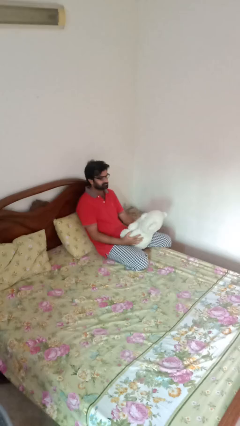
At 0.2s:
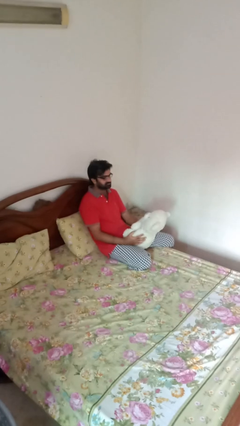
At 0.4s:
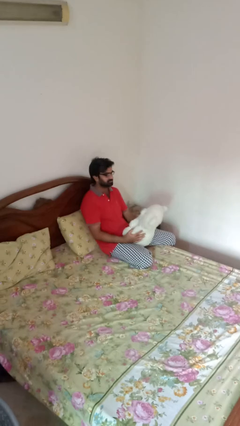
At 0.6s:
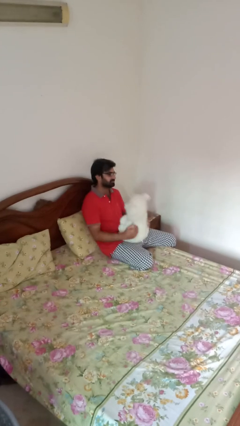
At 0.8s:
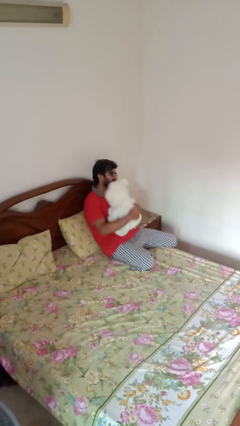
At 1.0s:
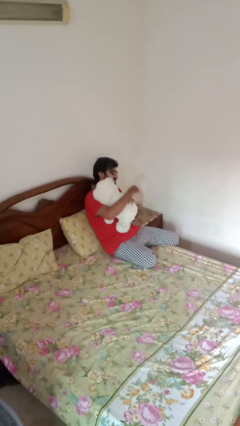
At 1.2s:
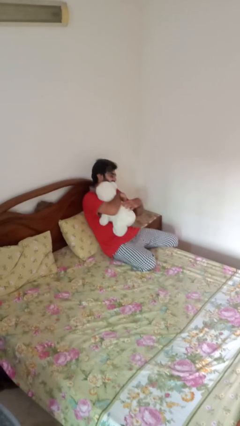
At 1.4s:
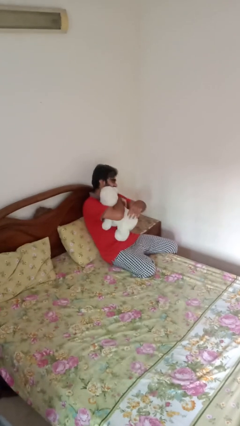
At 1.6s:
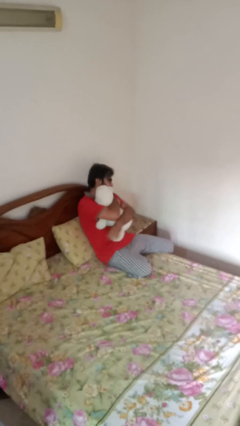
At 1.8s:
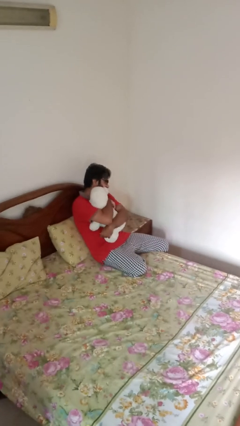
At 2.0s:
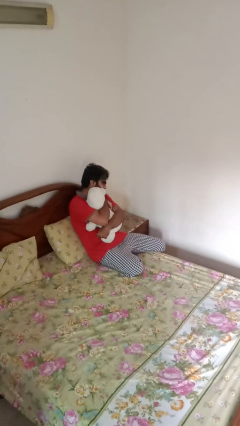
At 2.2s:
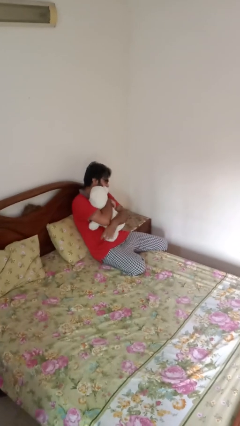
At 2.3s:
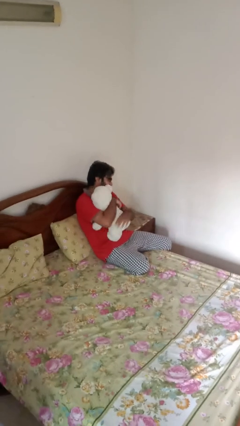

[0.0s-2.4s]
person hugs stuffed animal

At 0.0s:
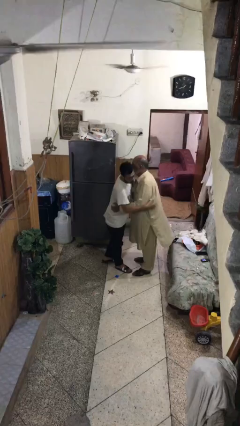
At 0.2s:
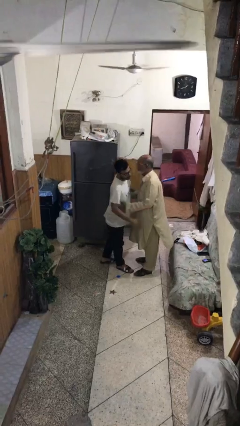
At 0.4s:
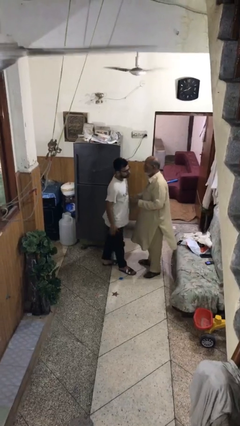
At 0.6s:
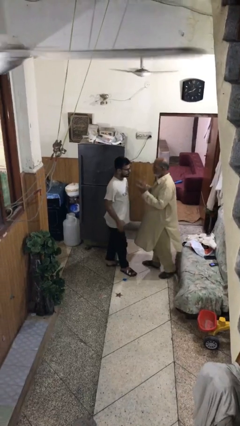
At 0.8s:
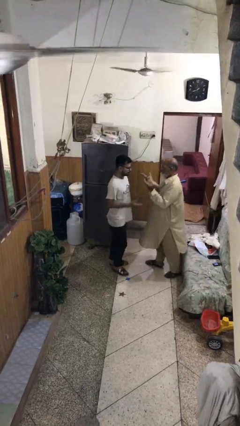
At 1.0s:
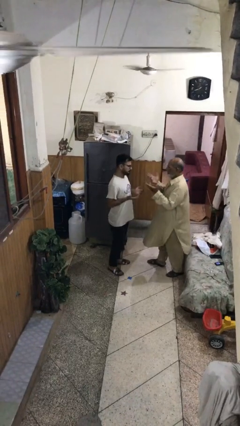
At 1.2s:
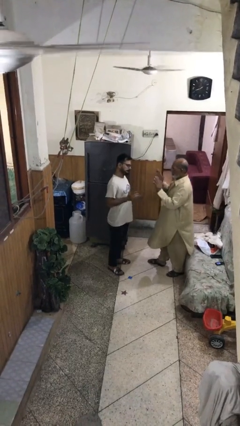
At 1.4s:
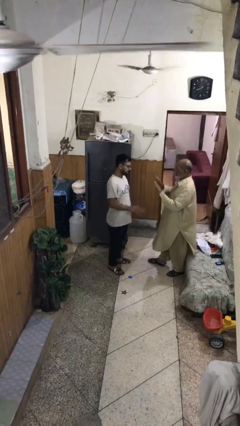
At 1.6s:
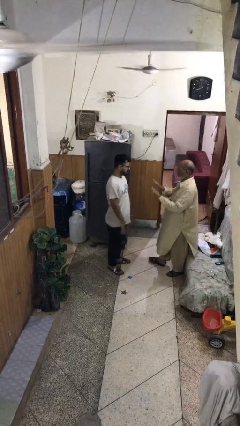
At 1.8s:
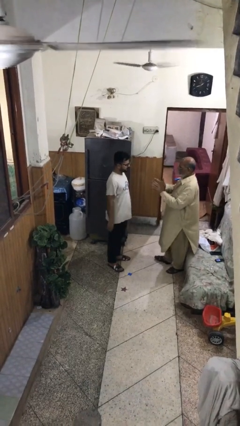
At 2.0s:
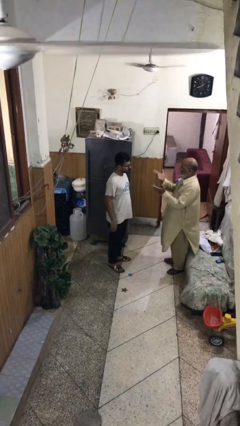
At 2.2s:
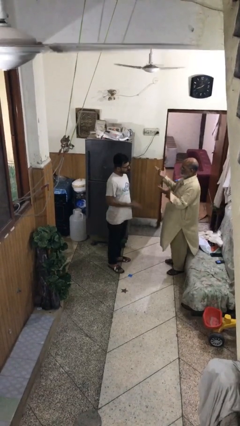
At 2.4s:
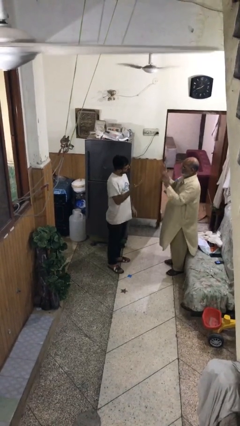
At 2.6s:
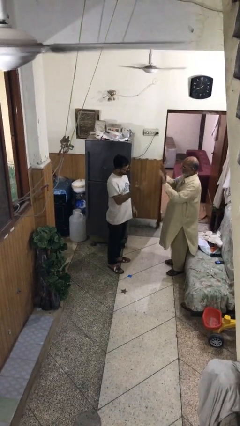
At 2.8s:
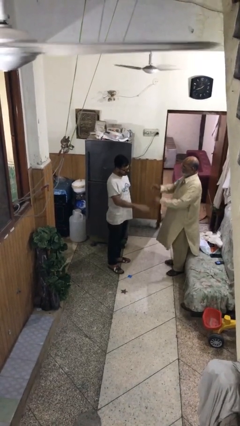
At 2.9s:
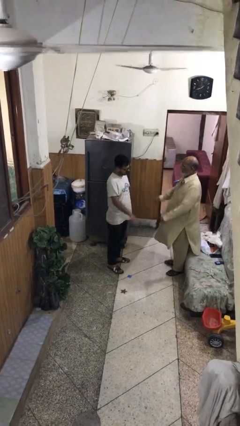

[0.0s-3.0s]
person talks to person

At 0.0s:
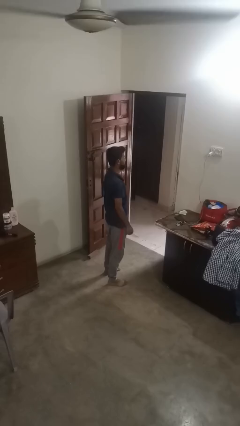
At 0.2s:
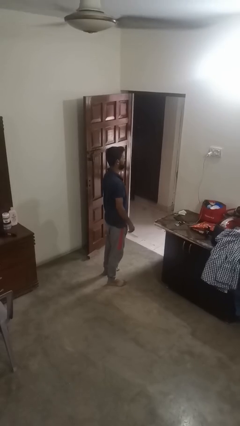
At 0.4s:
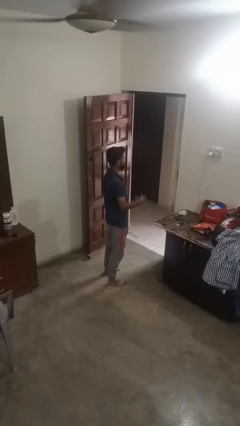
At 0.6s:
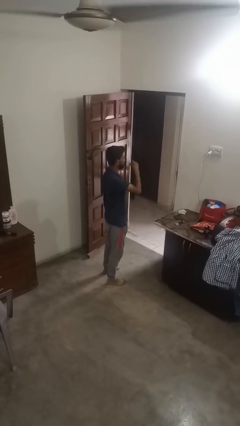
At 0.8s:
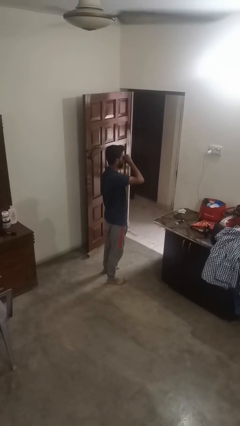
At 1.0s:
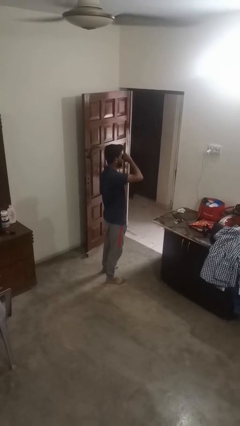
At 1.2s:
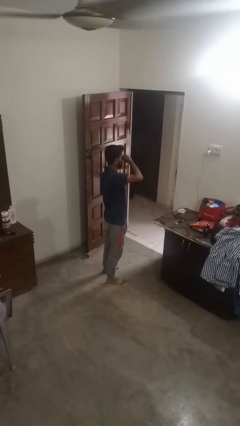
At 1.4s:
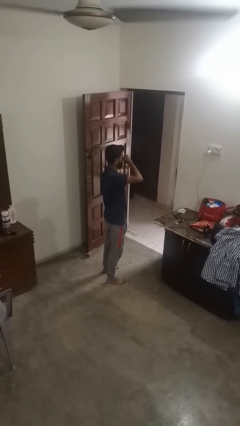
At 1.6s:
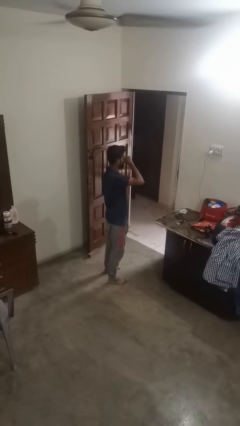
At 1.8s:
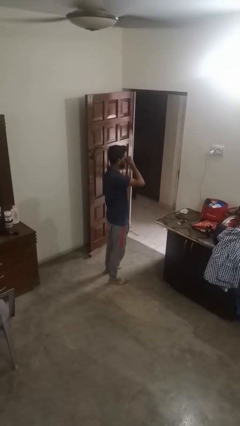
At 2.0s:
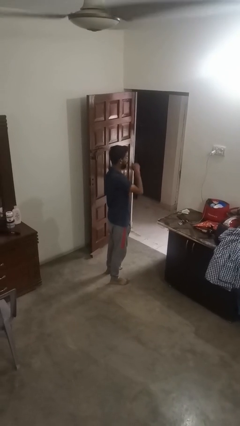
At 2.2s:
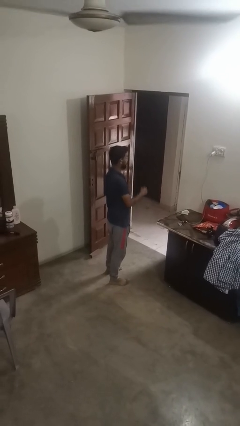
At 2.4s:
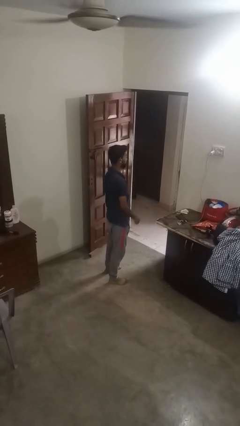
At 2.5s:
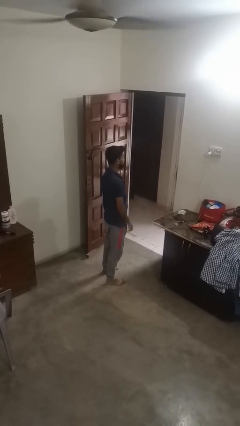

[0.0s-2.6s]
person rubs eyes

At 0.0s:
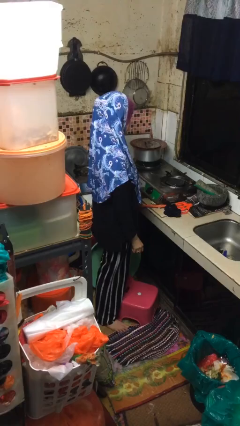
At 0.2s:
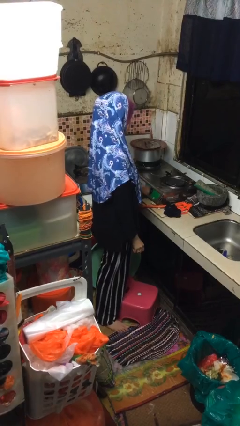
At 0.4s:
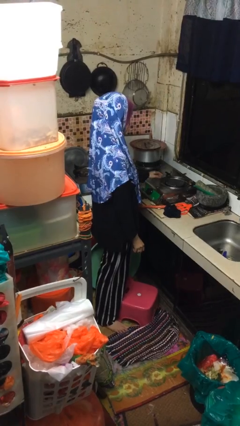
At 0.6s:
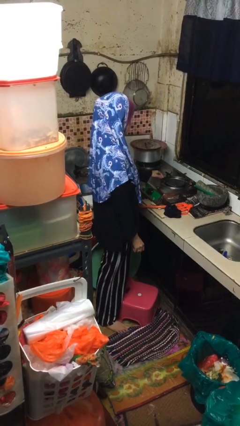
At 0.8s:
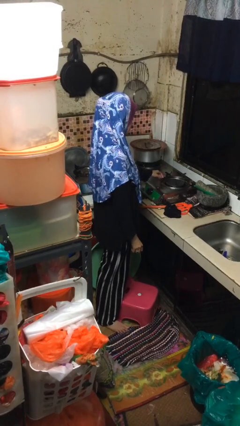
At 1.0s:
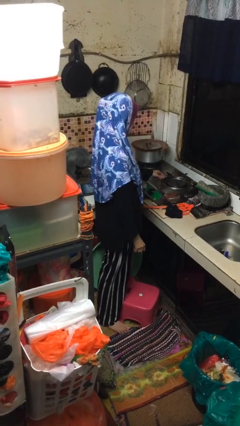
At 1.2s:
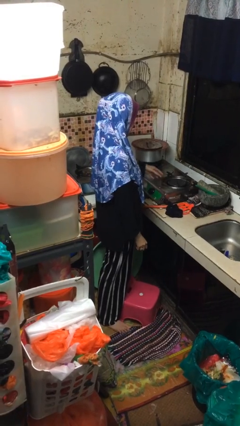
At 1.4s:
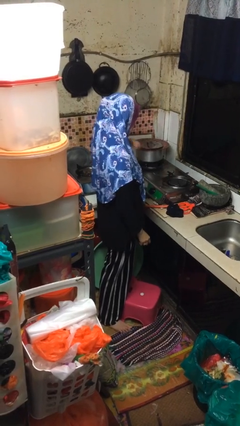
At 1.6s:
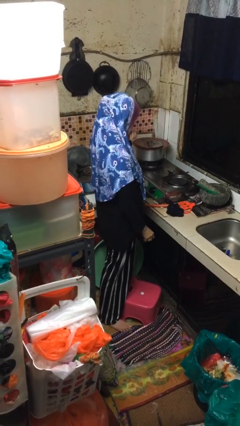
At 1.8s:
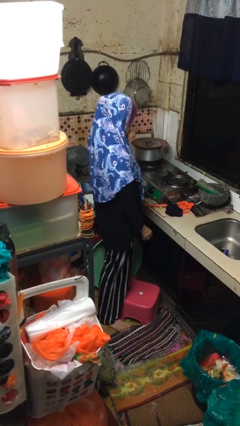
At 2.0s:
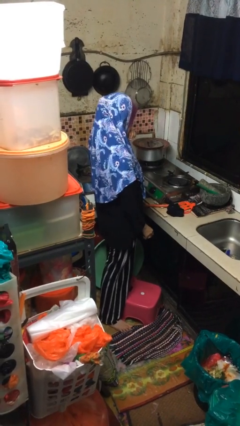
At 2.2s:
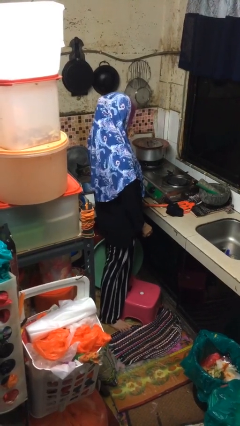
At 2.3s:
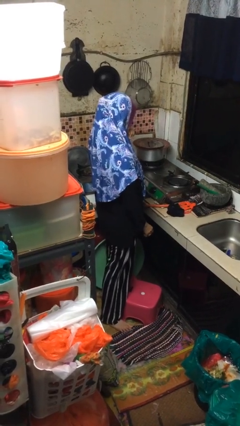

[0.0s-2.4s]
person burns hand

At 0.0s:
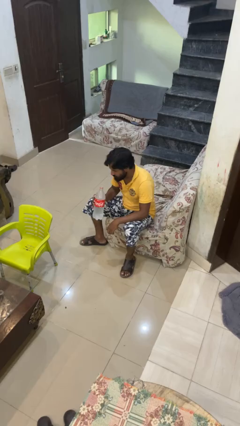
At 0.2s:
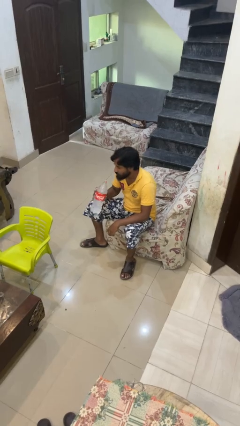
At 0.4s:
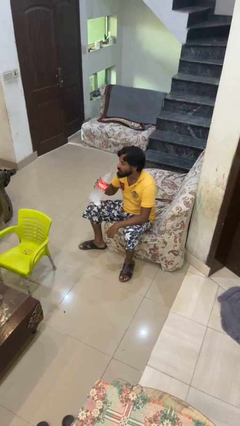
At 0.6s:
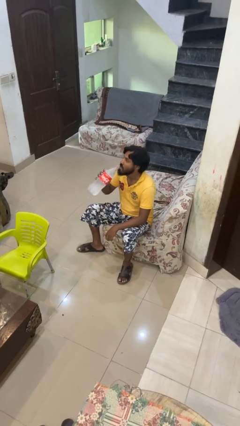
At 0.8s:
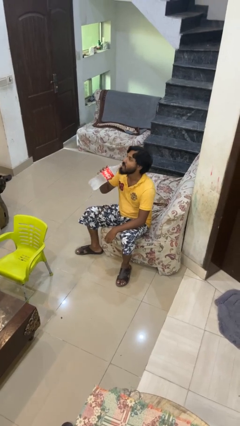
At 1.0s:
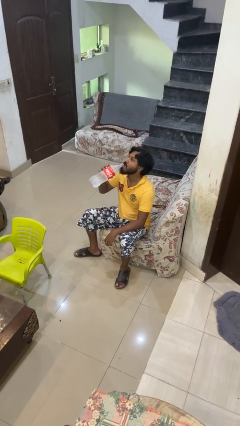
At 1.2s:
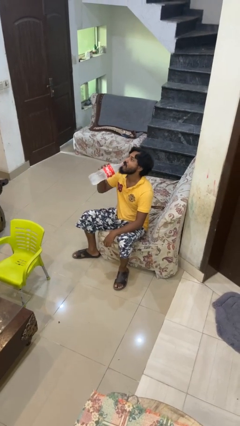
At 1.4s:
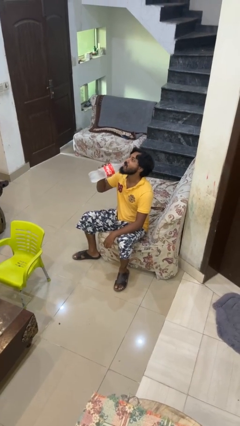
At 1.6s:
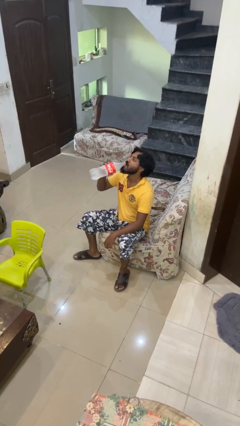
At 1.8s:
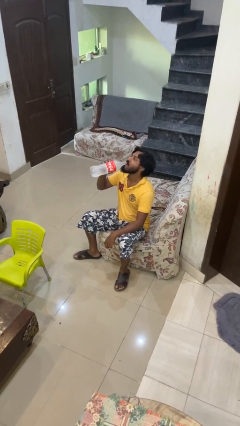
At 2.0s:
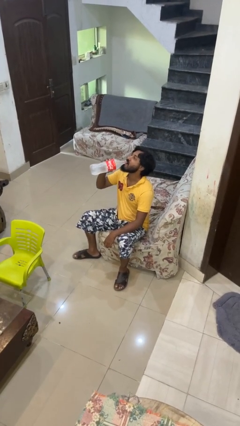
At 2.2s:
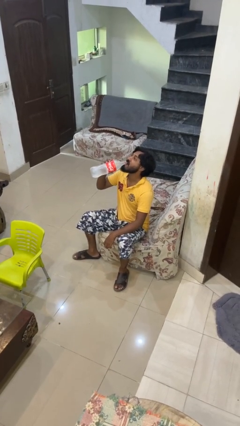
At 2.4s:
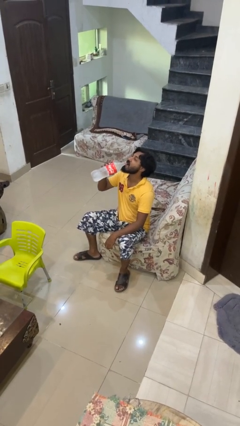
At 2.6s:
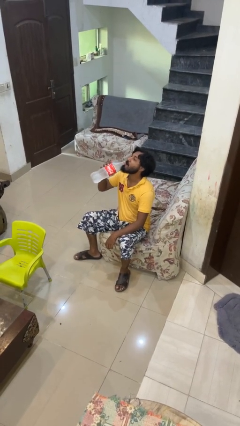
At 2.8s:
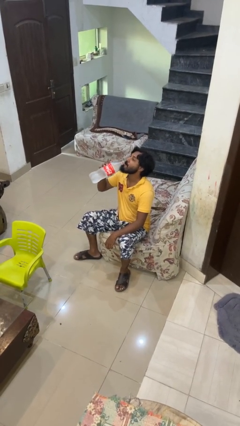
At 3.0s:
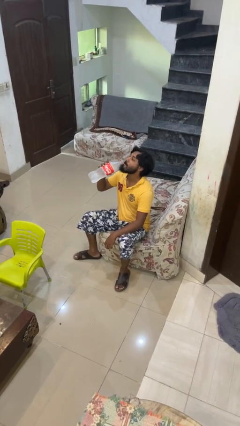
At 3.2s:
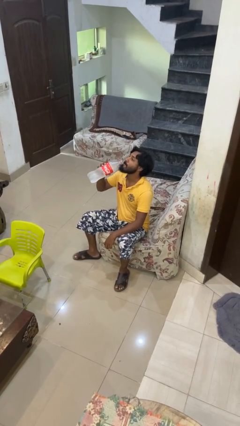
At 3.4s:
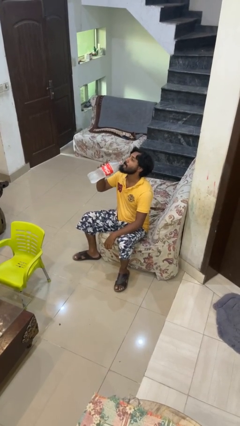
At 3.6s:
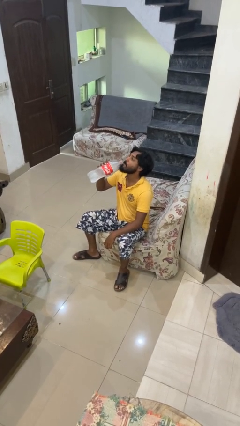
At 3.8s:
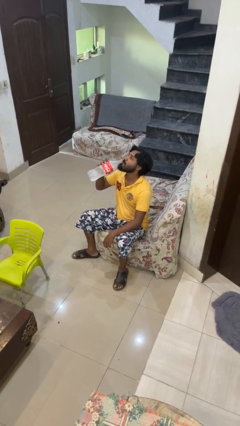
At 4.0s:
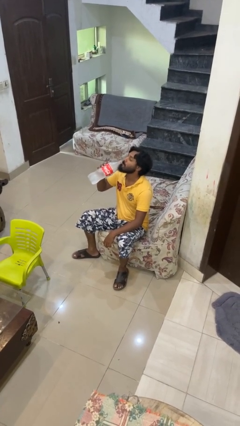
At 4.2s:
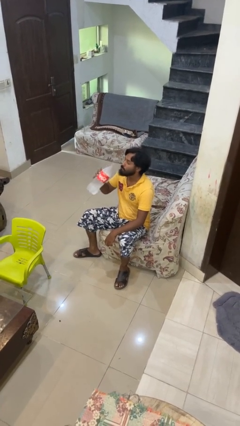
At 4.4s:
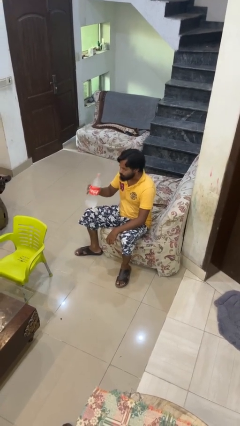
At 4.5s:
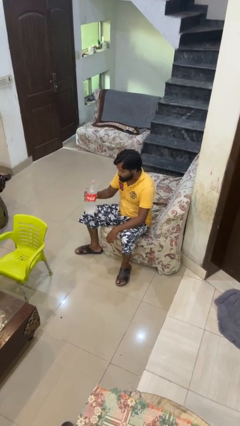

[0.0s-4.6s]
person drinks from bottle

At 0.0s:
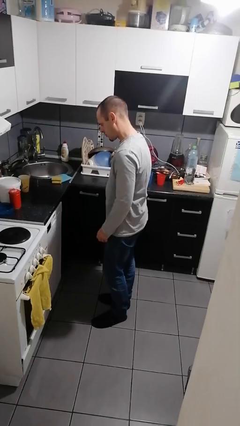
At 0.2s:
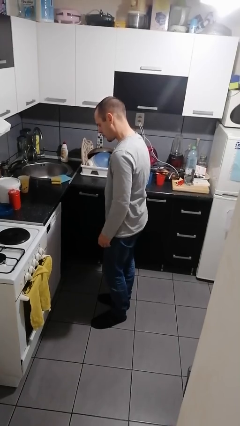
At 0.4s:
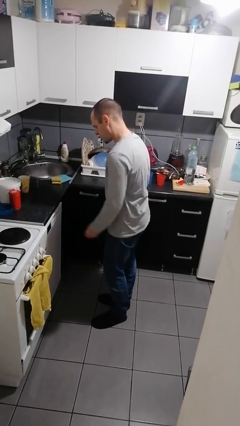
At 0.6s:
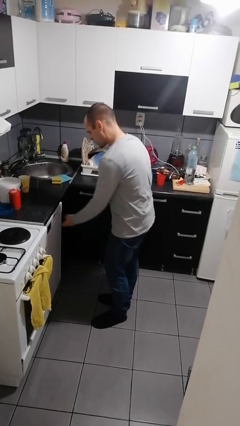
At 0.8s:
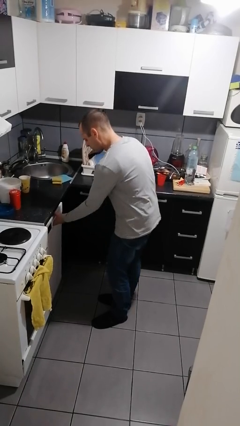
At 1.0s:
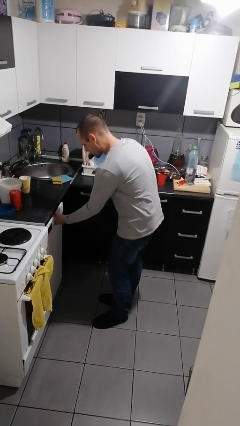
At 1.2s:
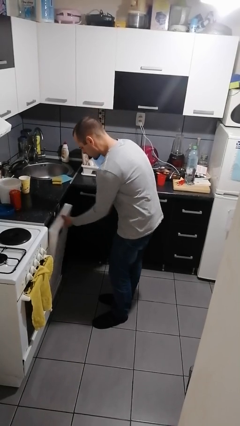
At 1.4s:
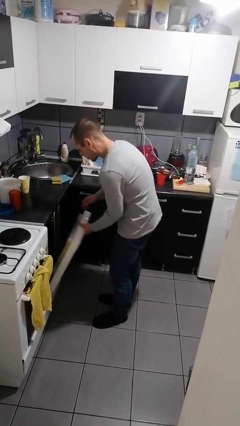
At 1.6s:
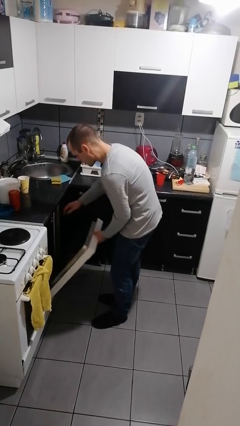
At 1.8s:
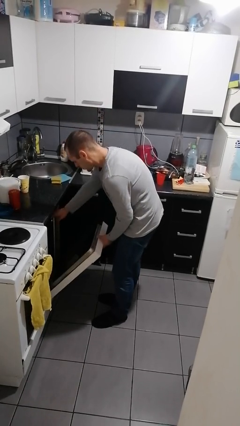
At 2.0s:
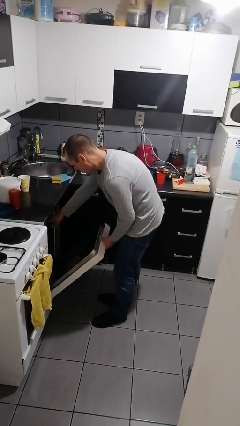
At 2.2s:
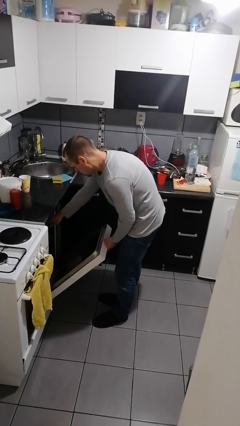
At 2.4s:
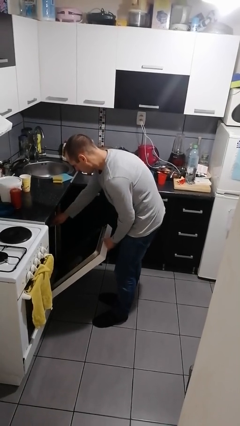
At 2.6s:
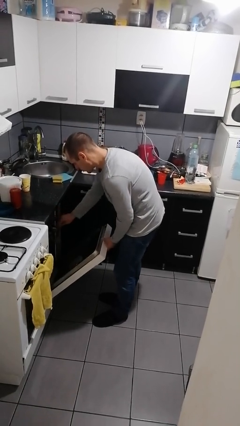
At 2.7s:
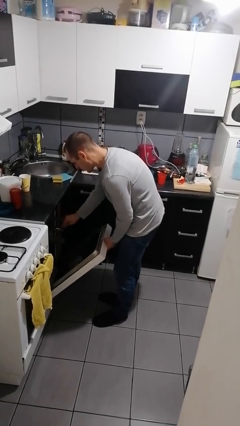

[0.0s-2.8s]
person opens dishwasher
